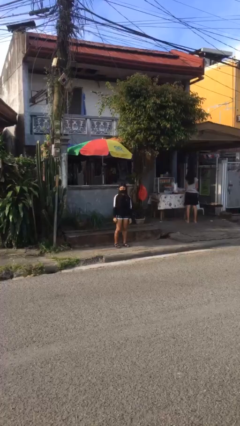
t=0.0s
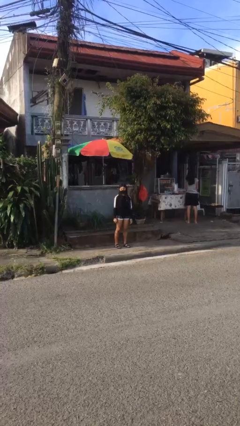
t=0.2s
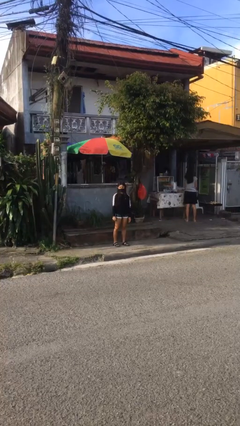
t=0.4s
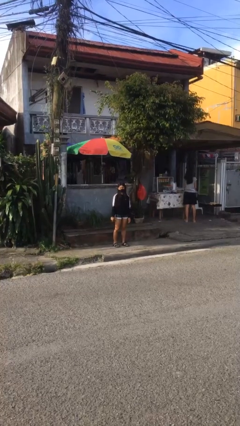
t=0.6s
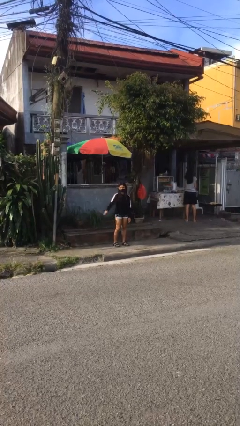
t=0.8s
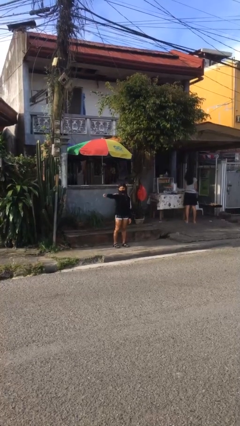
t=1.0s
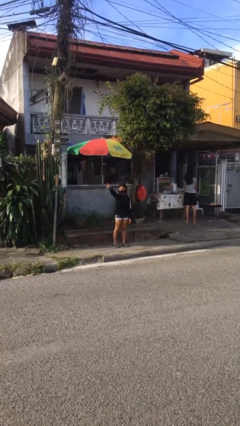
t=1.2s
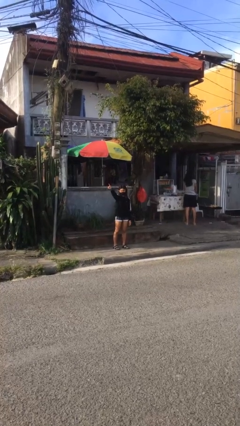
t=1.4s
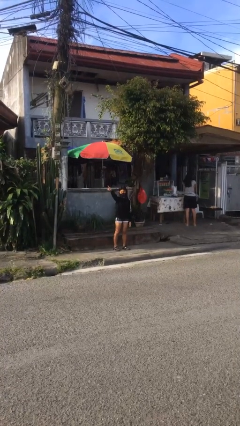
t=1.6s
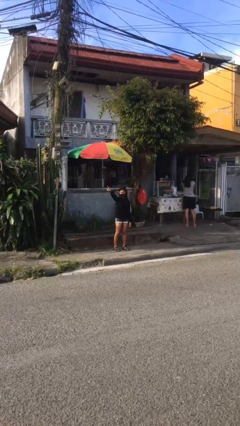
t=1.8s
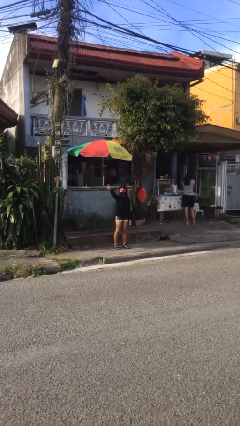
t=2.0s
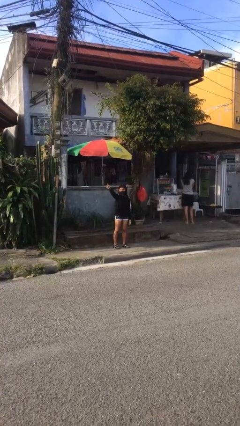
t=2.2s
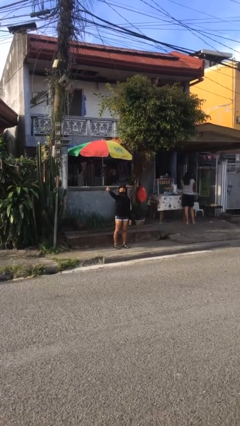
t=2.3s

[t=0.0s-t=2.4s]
person points at person

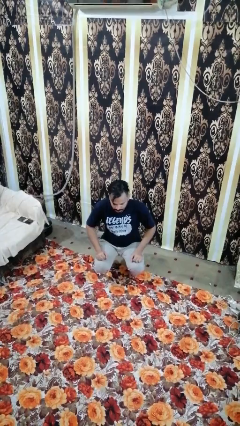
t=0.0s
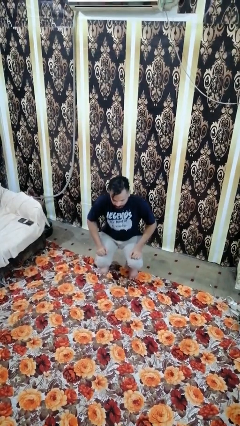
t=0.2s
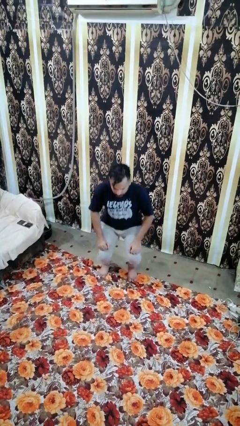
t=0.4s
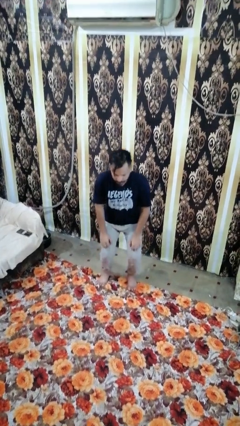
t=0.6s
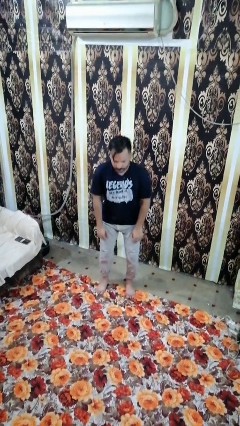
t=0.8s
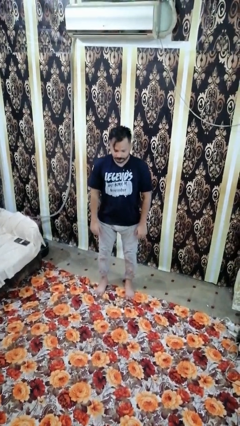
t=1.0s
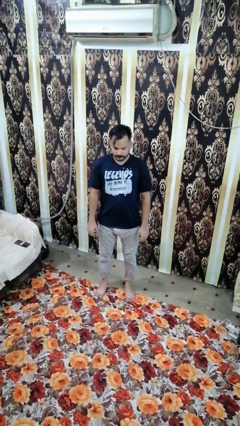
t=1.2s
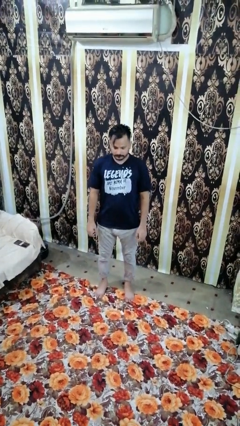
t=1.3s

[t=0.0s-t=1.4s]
person stands up

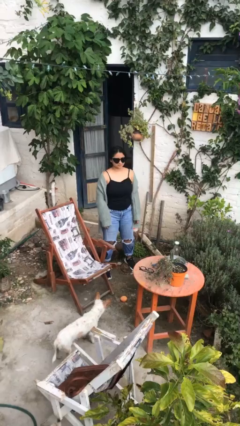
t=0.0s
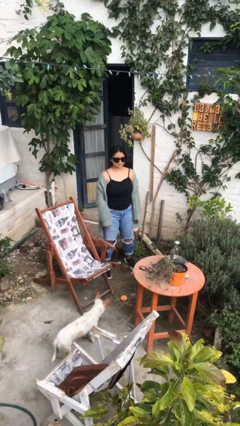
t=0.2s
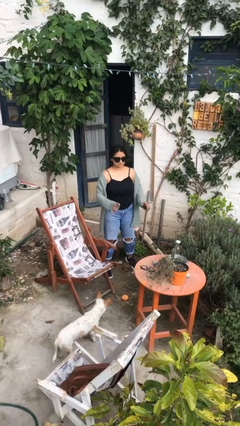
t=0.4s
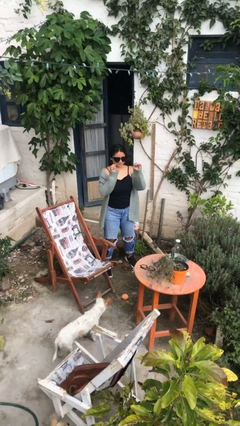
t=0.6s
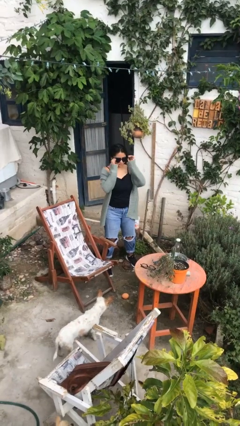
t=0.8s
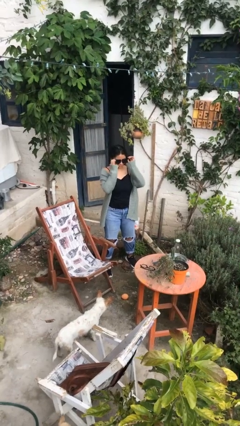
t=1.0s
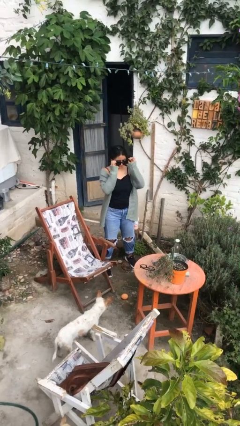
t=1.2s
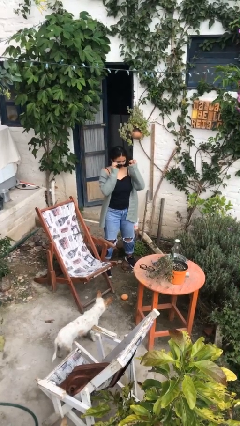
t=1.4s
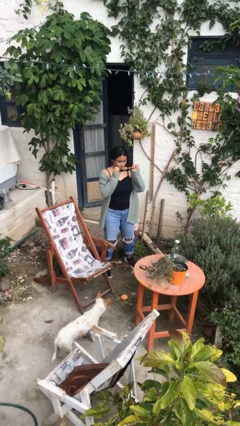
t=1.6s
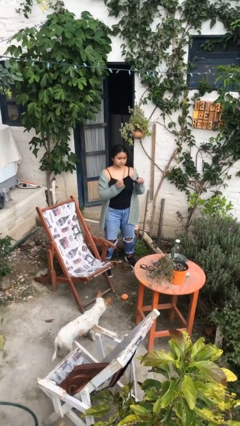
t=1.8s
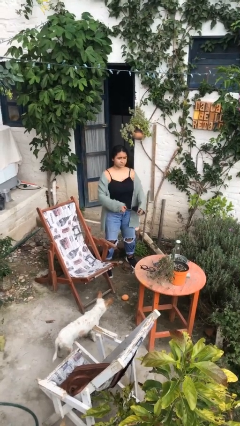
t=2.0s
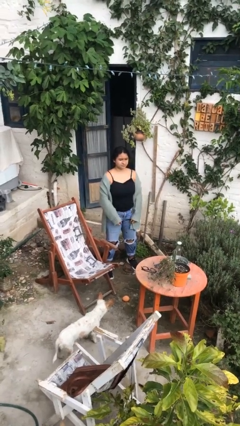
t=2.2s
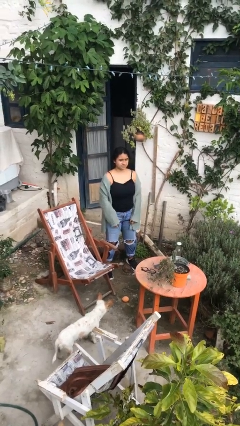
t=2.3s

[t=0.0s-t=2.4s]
person takes off sunglasses

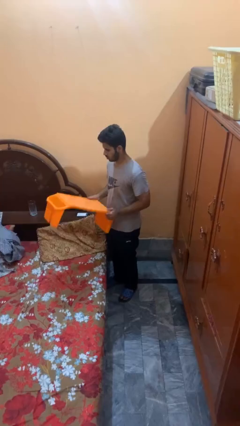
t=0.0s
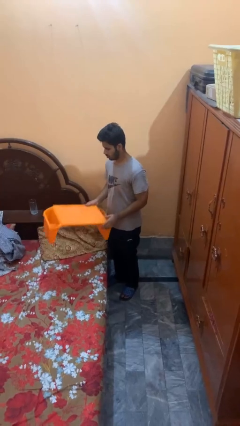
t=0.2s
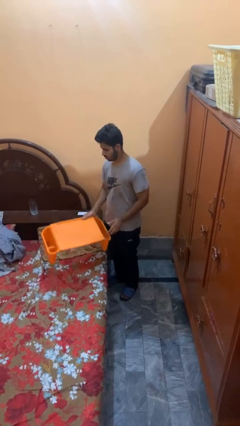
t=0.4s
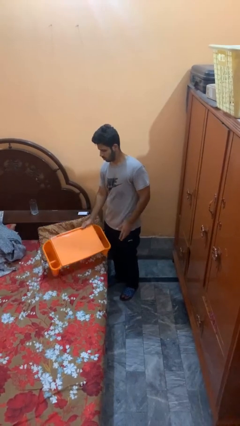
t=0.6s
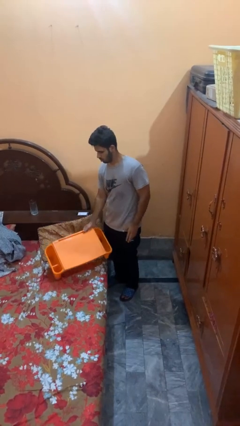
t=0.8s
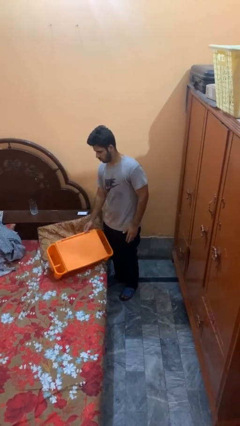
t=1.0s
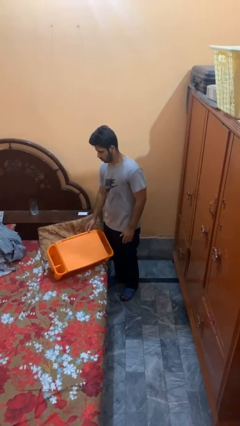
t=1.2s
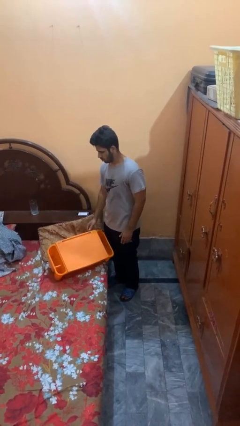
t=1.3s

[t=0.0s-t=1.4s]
person puts down object on bed

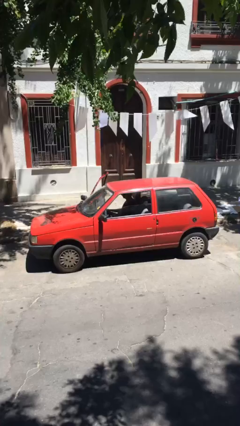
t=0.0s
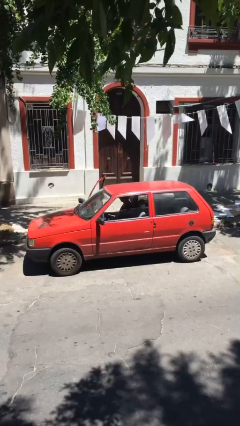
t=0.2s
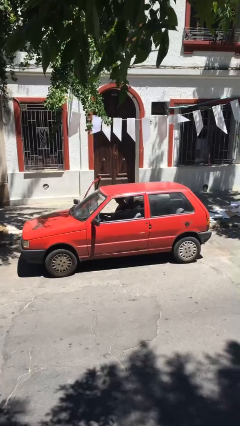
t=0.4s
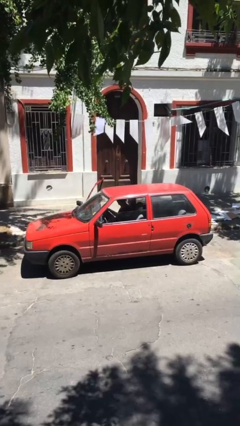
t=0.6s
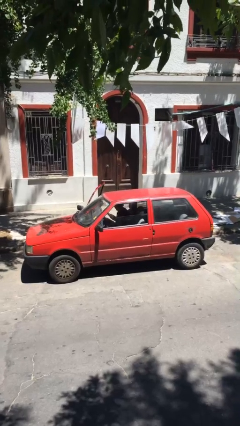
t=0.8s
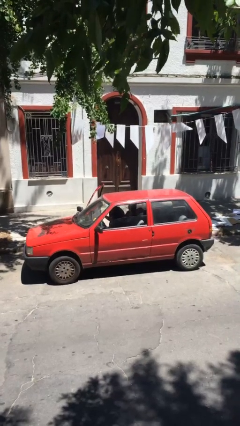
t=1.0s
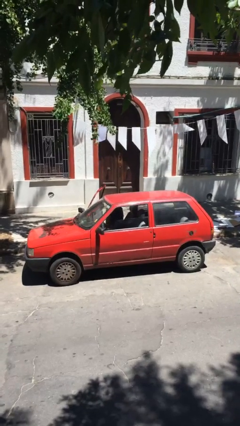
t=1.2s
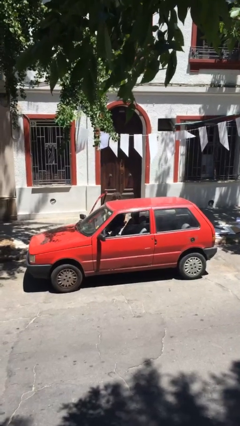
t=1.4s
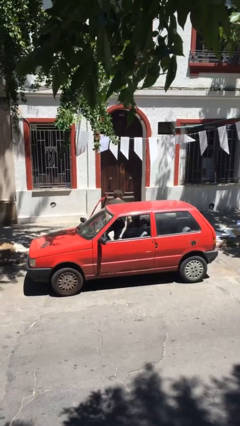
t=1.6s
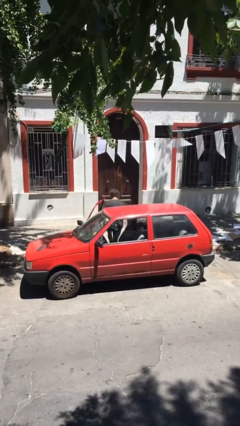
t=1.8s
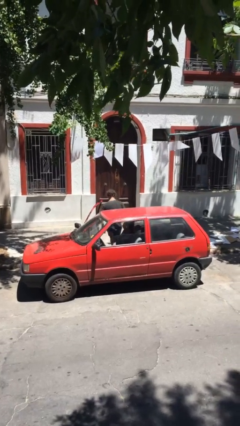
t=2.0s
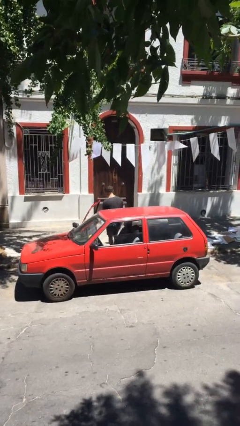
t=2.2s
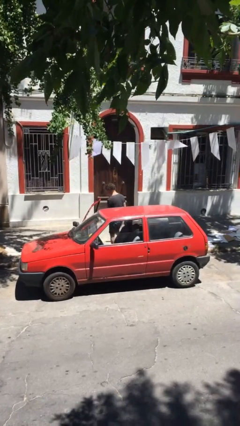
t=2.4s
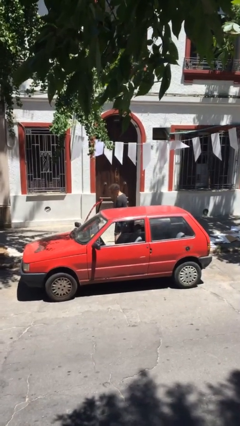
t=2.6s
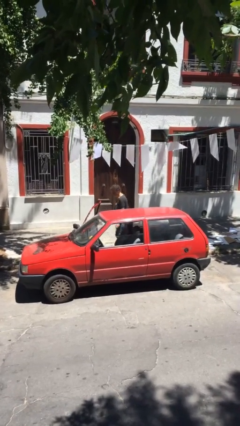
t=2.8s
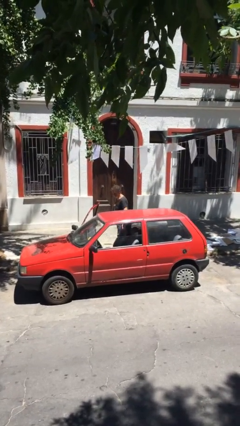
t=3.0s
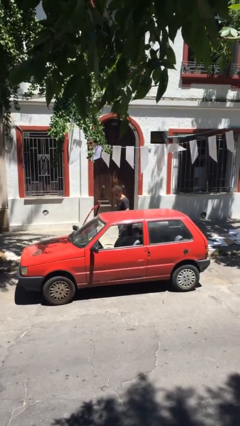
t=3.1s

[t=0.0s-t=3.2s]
person exits car

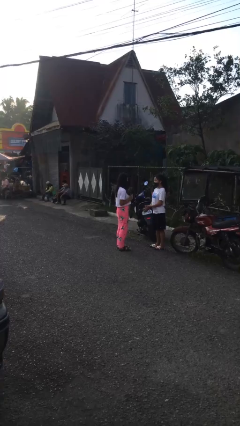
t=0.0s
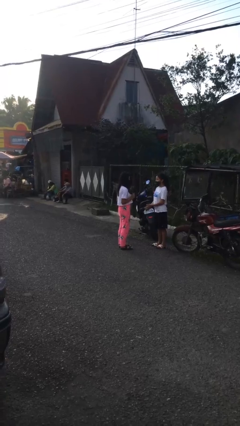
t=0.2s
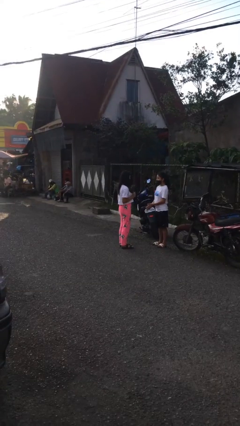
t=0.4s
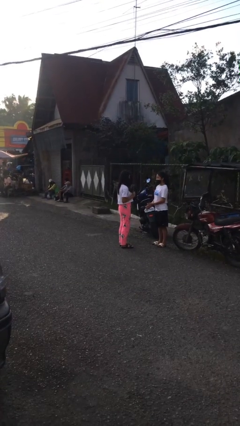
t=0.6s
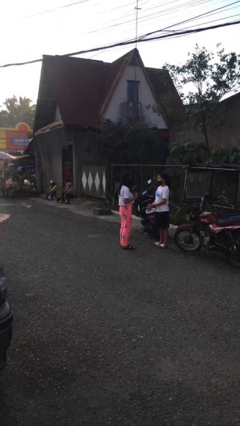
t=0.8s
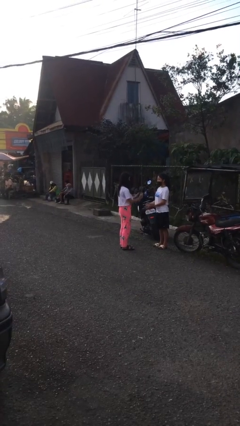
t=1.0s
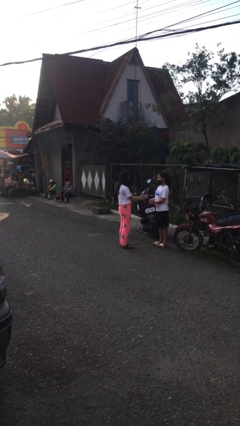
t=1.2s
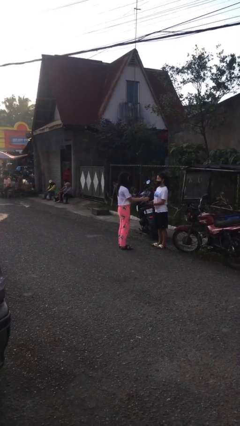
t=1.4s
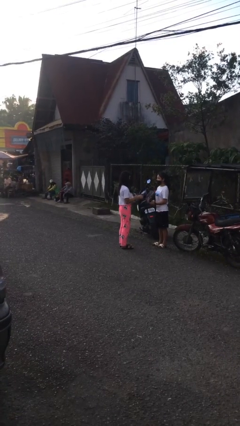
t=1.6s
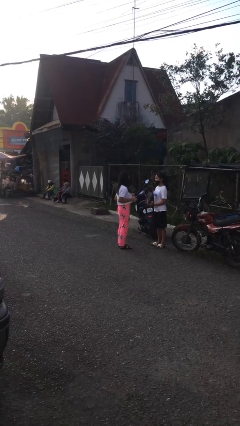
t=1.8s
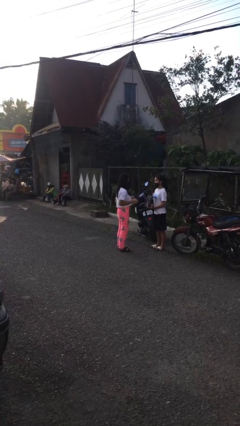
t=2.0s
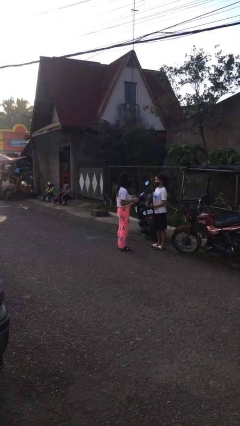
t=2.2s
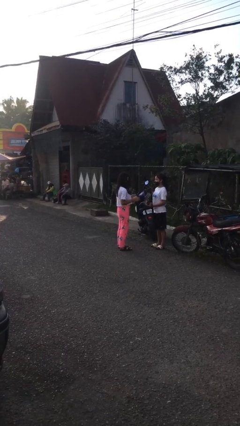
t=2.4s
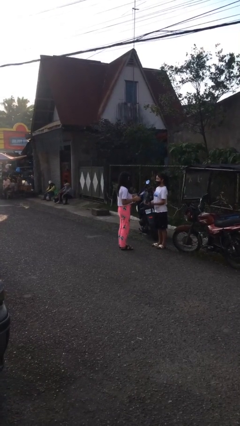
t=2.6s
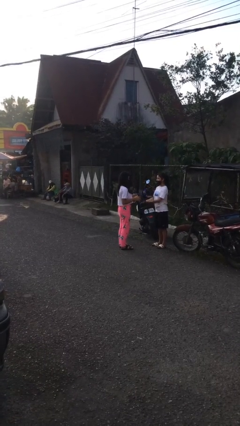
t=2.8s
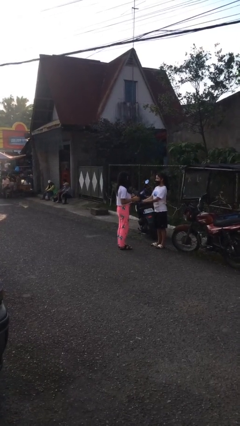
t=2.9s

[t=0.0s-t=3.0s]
person transfers object to person

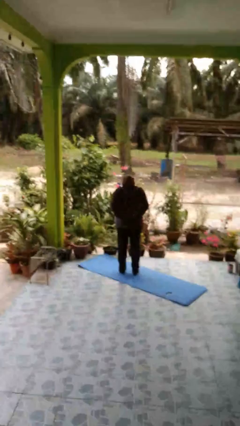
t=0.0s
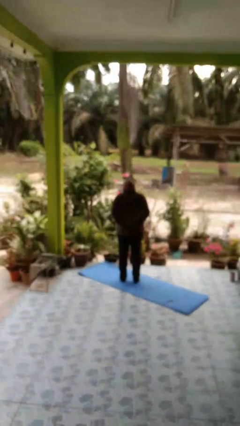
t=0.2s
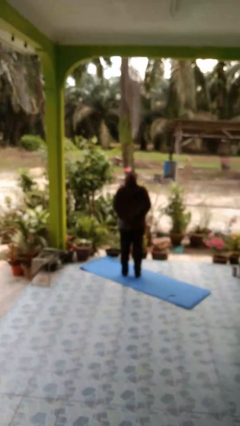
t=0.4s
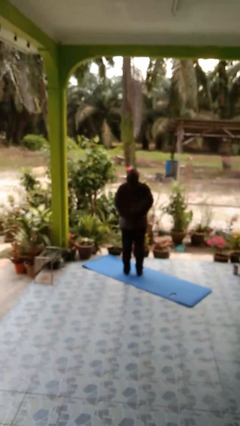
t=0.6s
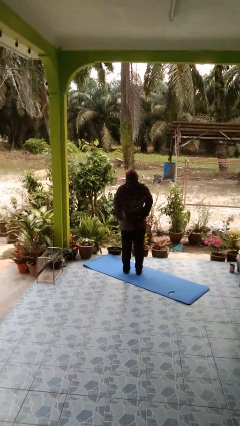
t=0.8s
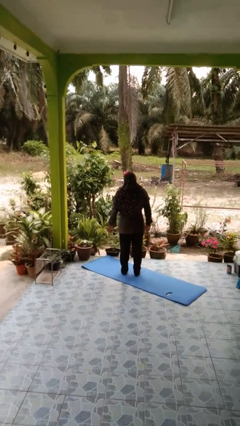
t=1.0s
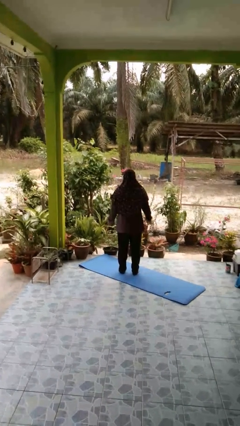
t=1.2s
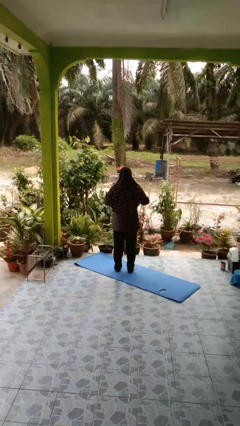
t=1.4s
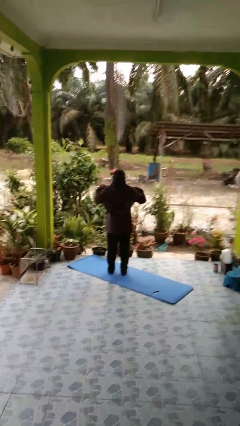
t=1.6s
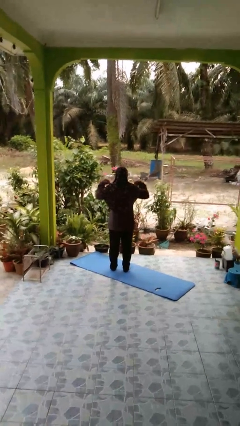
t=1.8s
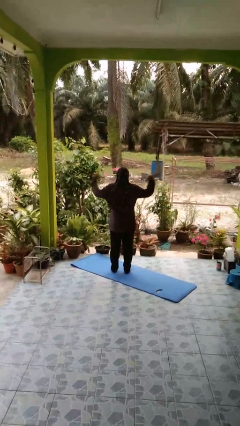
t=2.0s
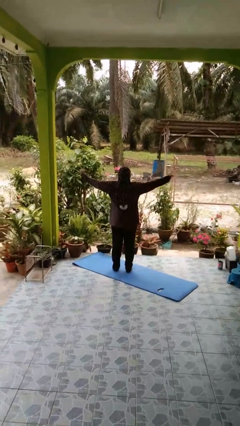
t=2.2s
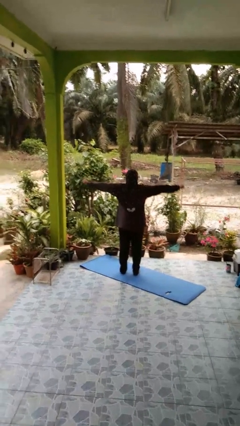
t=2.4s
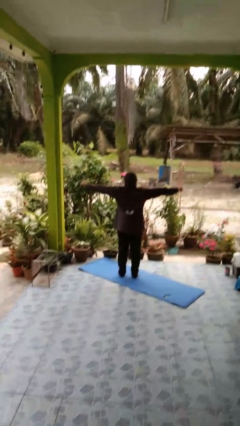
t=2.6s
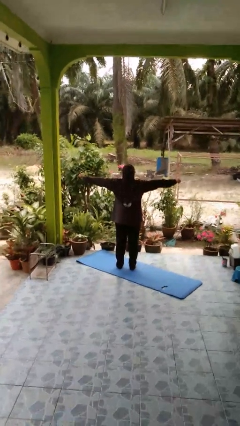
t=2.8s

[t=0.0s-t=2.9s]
person stretches back

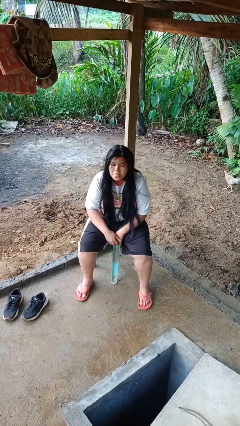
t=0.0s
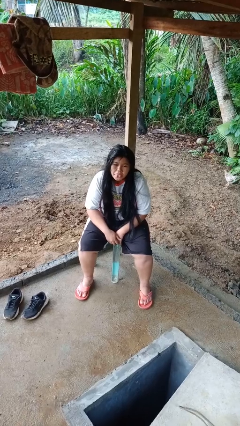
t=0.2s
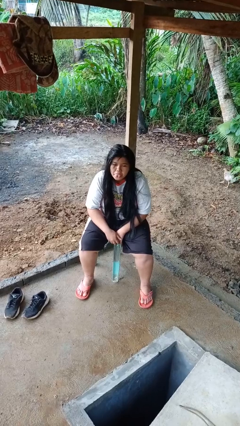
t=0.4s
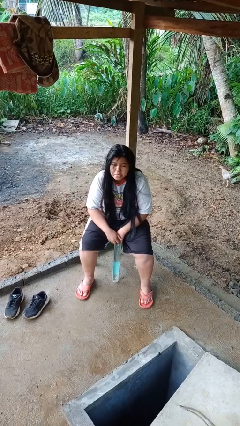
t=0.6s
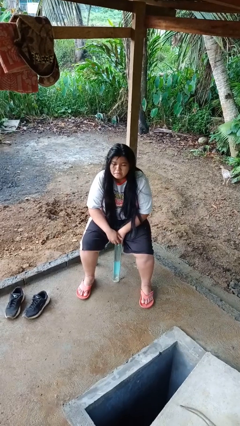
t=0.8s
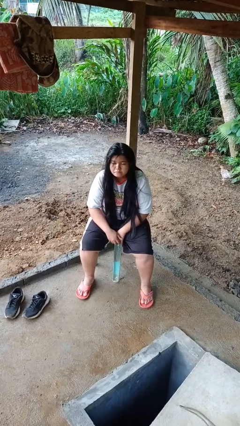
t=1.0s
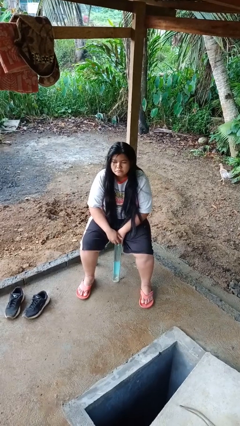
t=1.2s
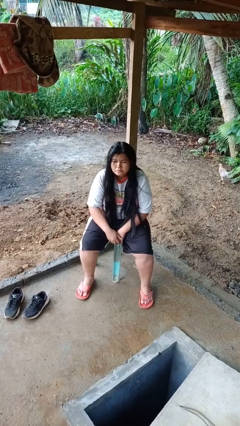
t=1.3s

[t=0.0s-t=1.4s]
person sticks out tongue
